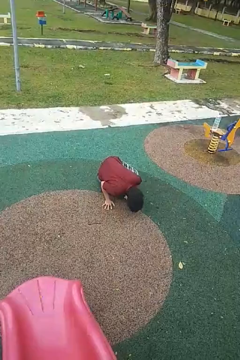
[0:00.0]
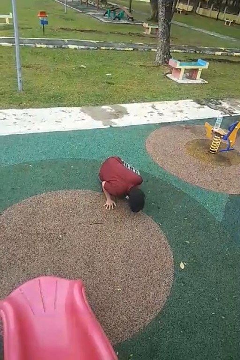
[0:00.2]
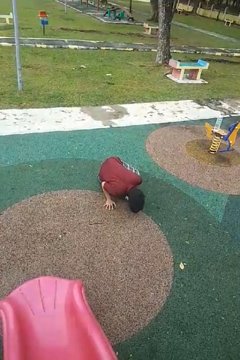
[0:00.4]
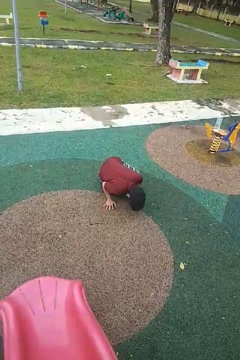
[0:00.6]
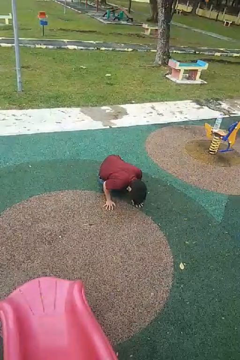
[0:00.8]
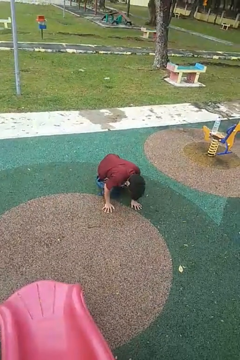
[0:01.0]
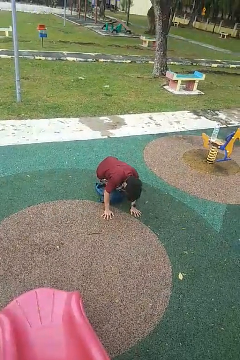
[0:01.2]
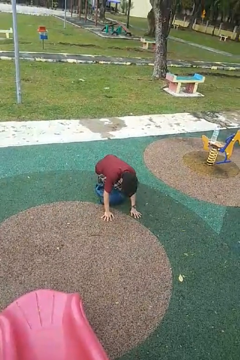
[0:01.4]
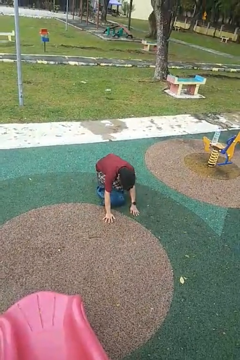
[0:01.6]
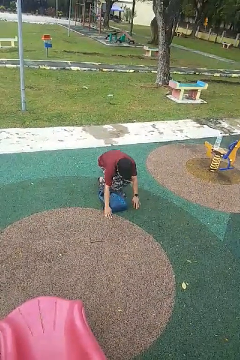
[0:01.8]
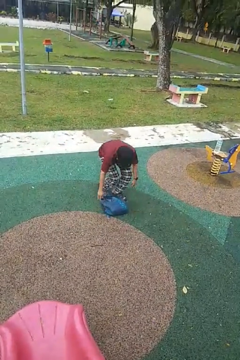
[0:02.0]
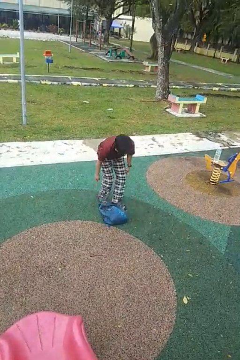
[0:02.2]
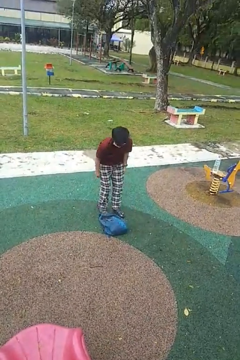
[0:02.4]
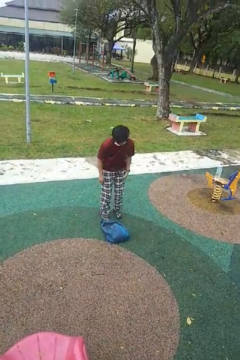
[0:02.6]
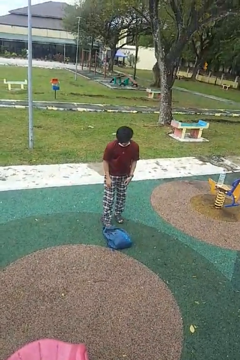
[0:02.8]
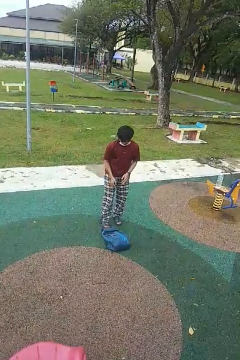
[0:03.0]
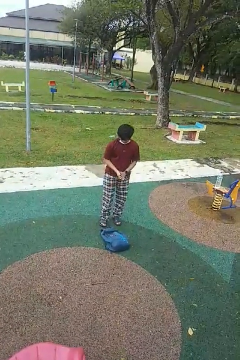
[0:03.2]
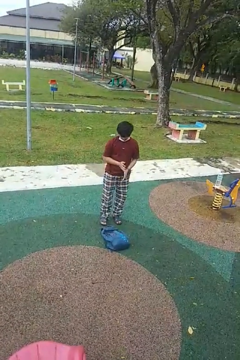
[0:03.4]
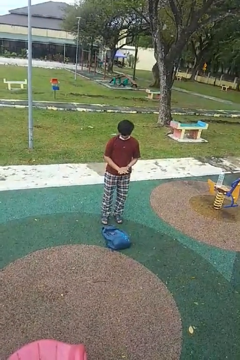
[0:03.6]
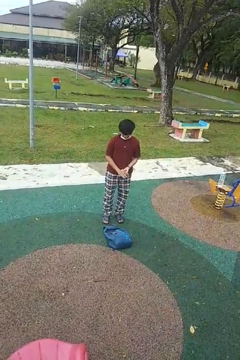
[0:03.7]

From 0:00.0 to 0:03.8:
person stands up from floor

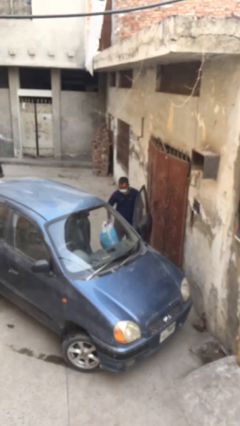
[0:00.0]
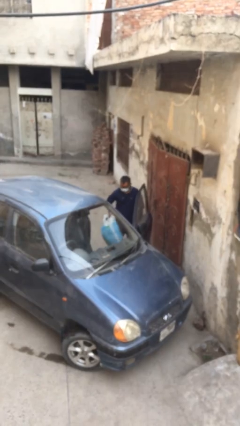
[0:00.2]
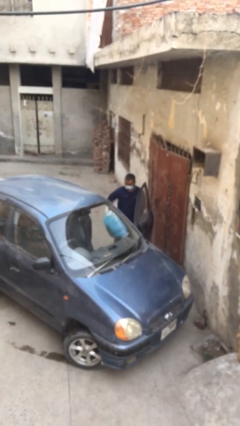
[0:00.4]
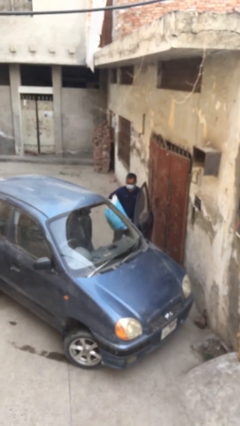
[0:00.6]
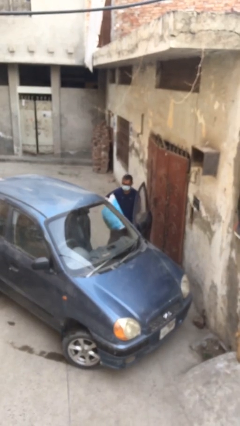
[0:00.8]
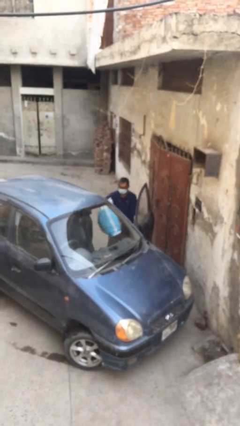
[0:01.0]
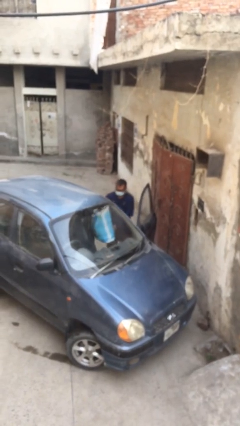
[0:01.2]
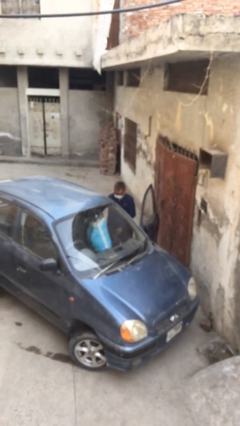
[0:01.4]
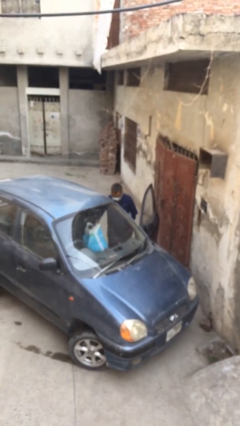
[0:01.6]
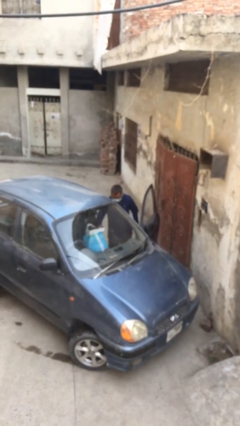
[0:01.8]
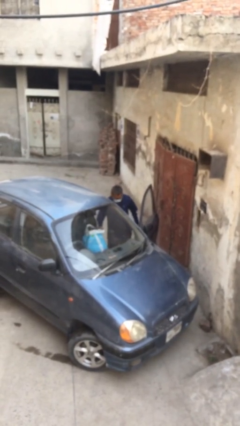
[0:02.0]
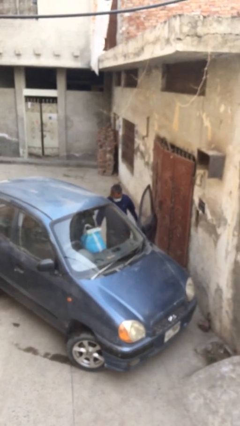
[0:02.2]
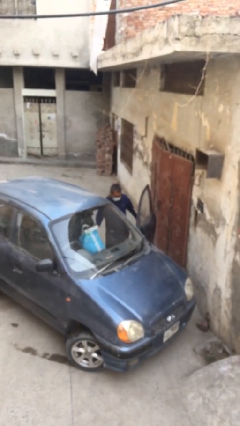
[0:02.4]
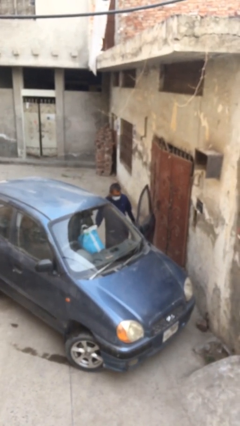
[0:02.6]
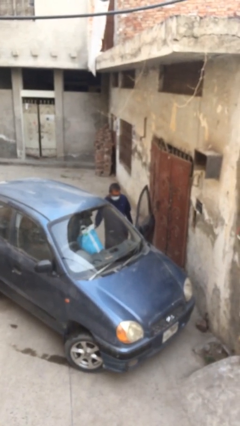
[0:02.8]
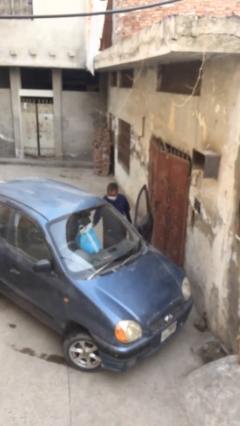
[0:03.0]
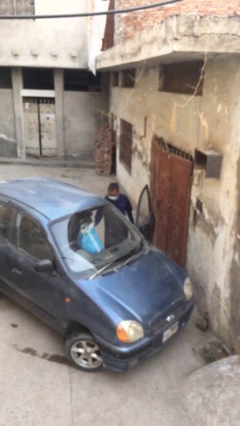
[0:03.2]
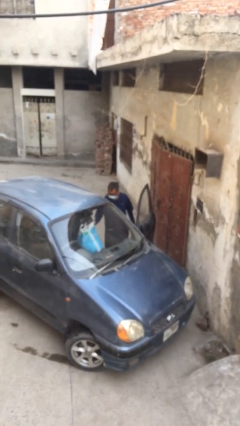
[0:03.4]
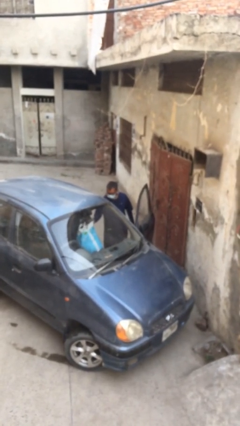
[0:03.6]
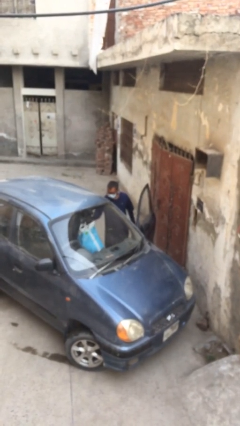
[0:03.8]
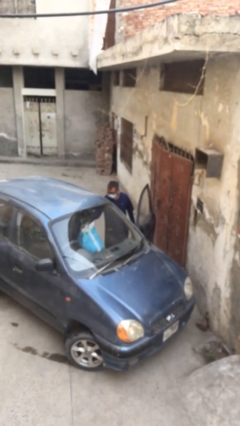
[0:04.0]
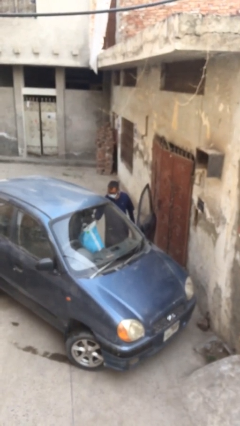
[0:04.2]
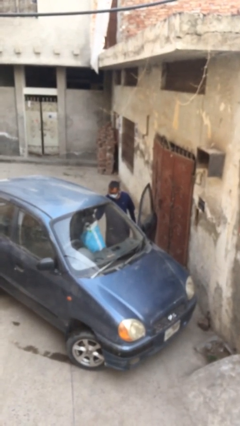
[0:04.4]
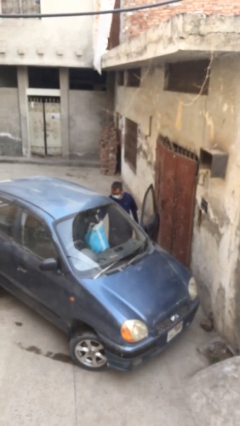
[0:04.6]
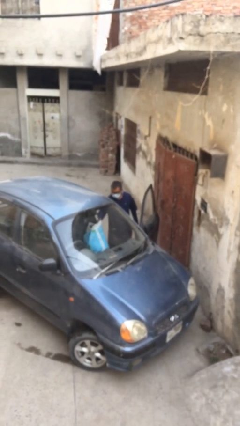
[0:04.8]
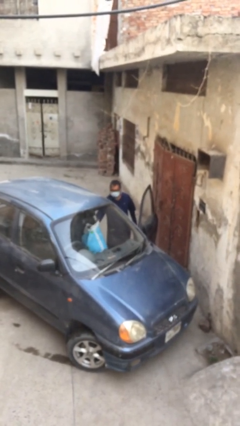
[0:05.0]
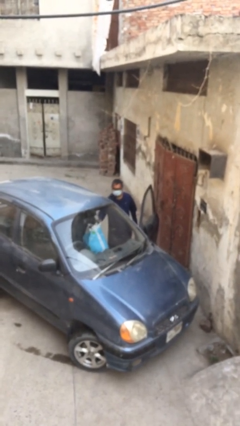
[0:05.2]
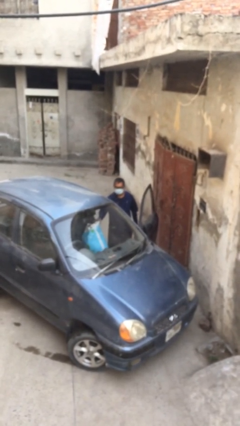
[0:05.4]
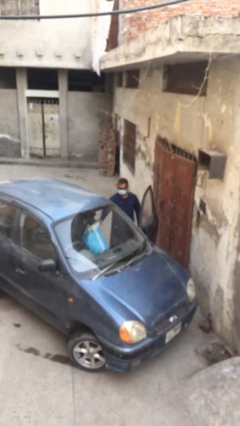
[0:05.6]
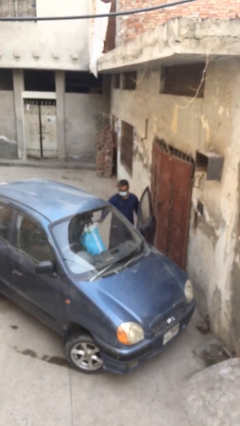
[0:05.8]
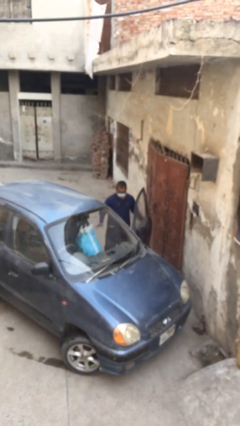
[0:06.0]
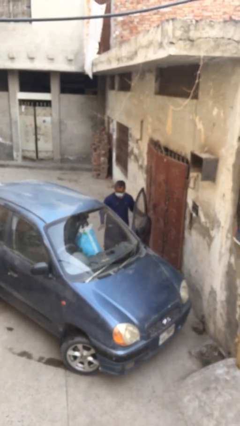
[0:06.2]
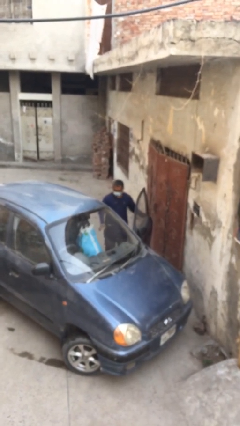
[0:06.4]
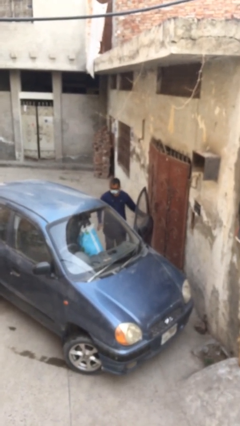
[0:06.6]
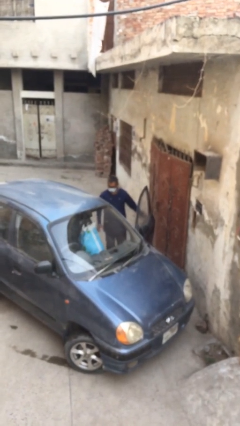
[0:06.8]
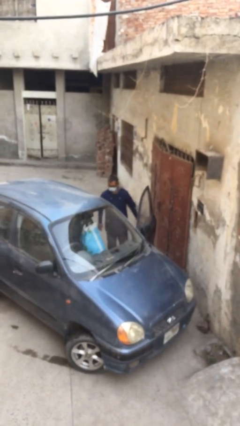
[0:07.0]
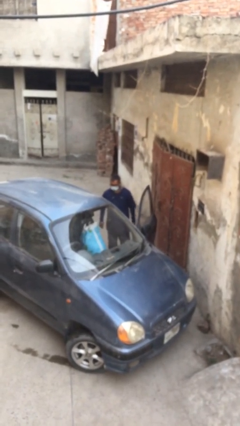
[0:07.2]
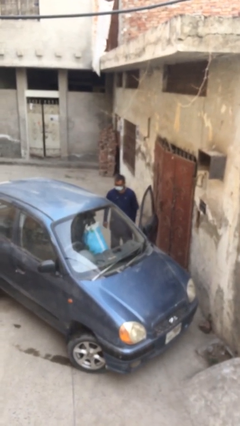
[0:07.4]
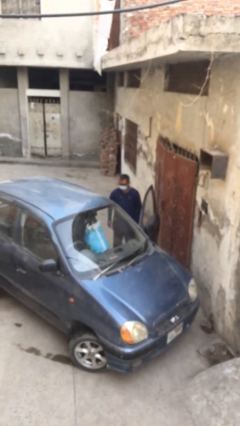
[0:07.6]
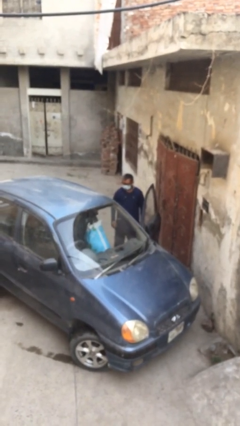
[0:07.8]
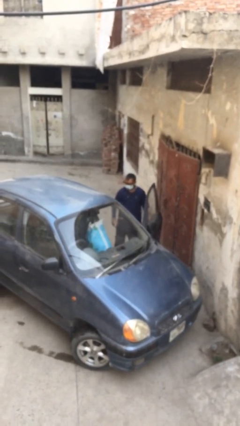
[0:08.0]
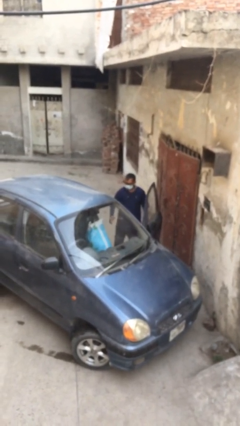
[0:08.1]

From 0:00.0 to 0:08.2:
person loads car

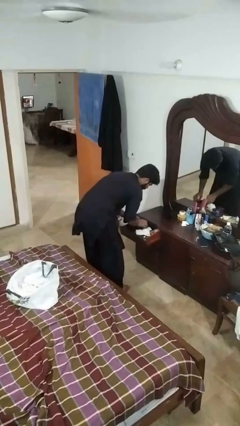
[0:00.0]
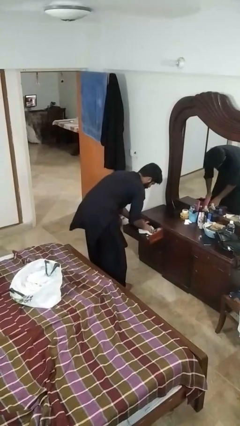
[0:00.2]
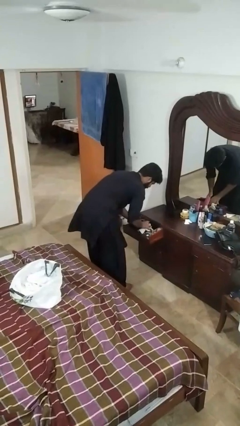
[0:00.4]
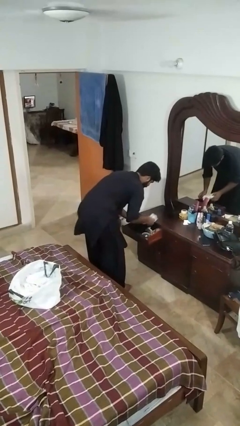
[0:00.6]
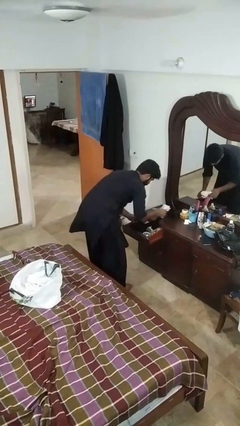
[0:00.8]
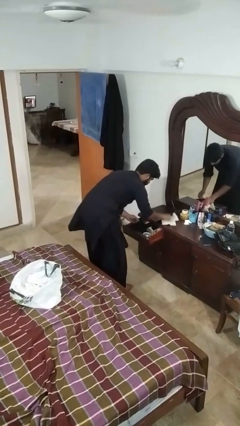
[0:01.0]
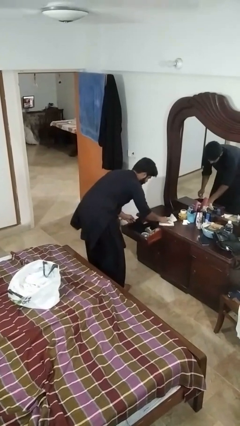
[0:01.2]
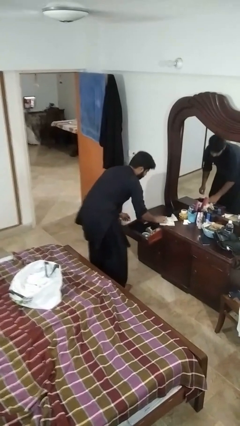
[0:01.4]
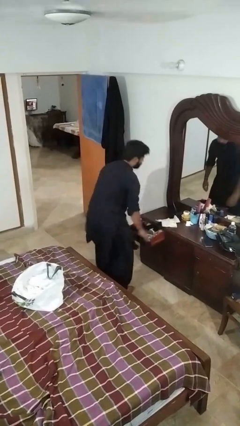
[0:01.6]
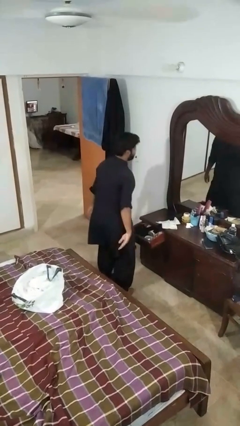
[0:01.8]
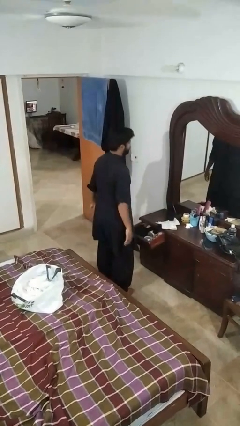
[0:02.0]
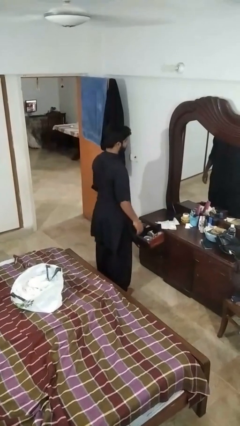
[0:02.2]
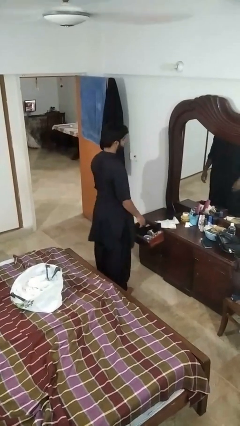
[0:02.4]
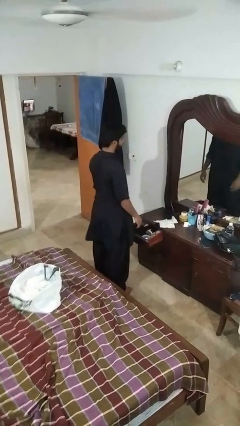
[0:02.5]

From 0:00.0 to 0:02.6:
person takes clothes from dresser

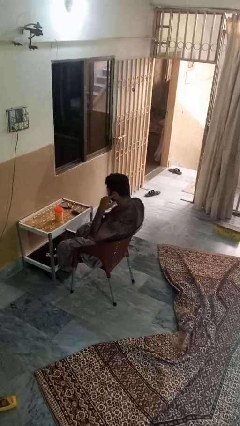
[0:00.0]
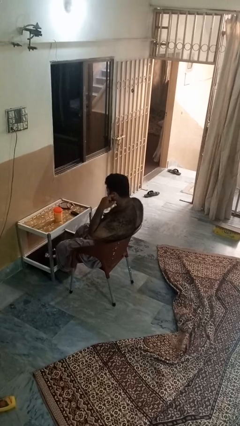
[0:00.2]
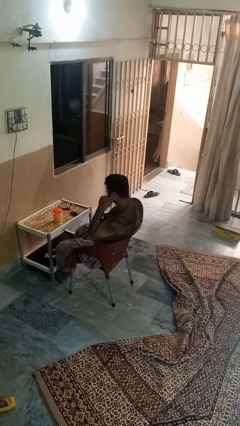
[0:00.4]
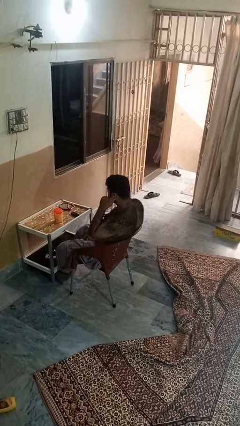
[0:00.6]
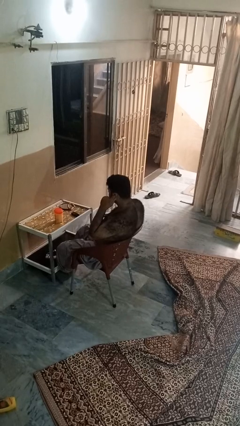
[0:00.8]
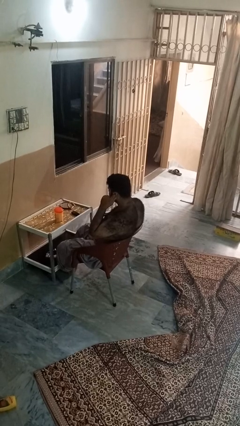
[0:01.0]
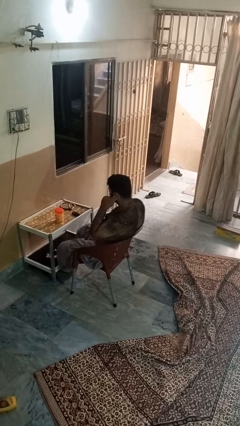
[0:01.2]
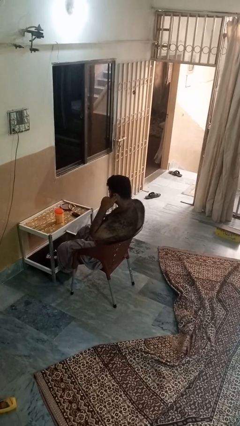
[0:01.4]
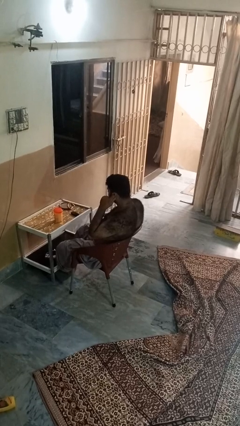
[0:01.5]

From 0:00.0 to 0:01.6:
person puts fingers in ear

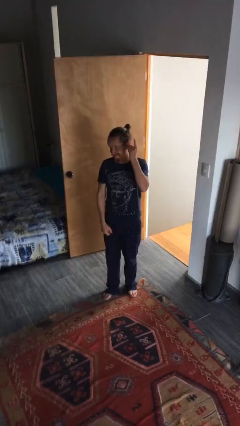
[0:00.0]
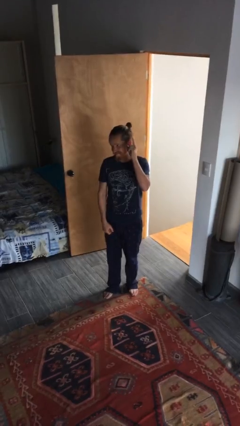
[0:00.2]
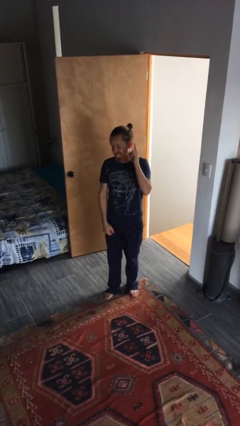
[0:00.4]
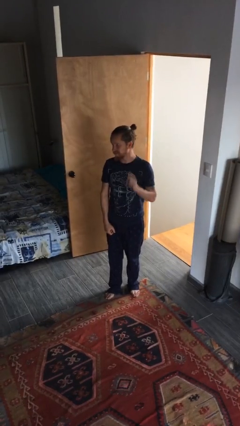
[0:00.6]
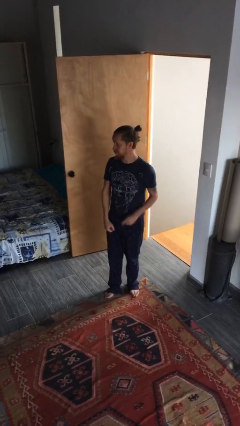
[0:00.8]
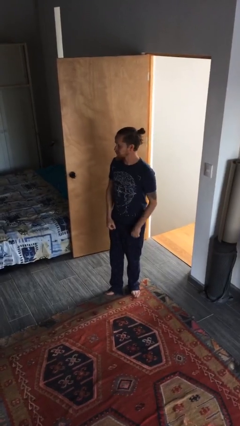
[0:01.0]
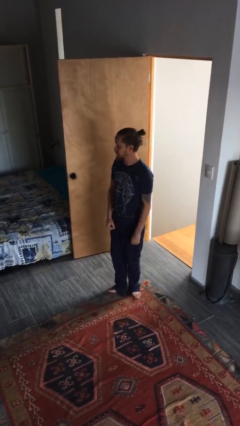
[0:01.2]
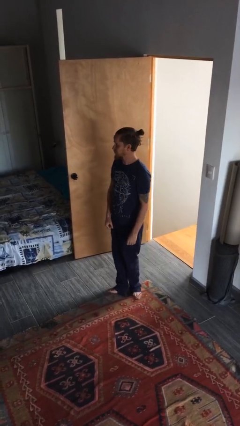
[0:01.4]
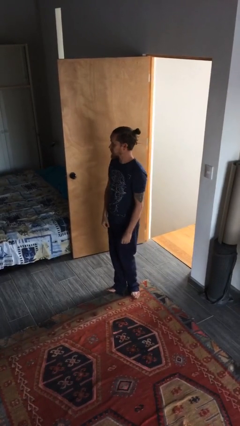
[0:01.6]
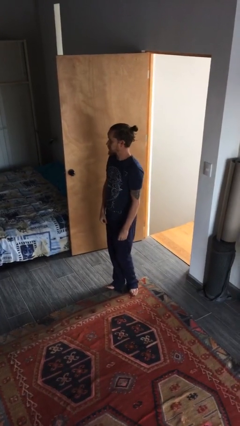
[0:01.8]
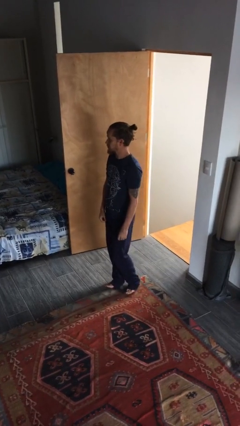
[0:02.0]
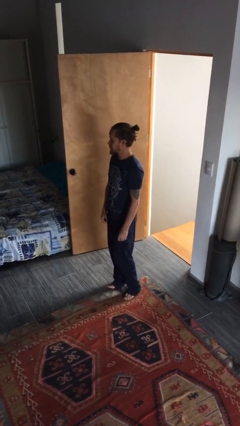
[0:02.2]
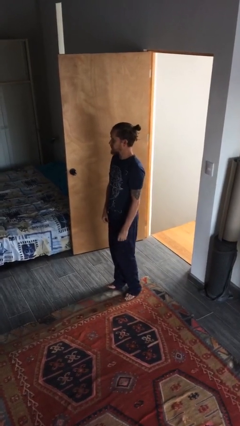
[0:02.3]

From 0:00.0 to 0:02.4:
person gestures lower hand
